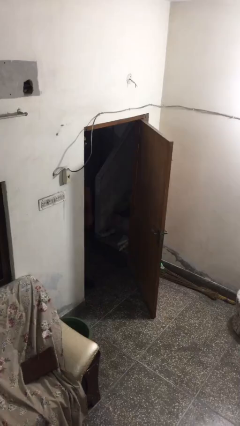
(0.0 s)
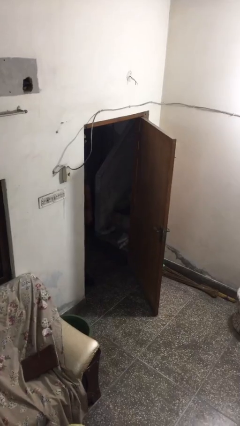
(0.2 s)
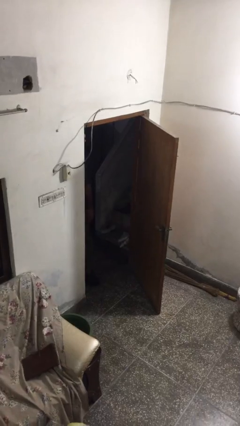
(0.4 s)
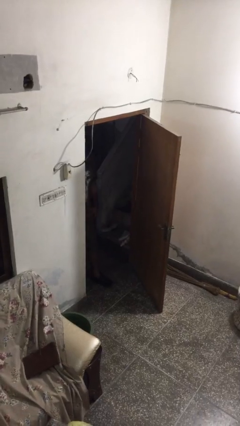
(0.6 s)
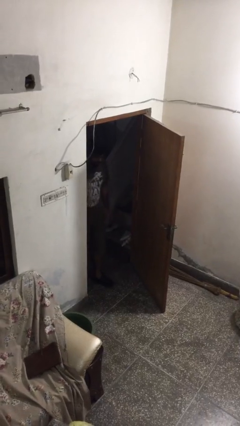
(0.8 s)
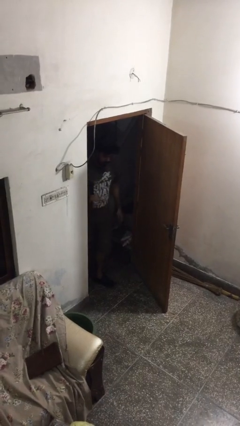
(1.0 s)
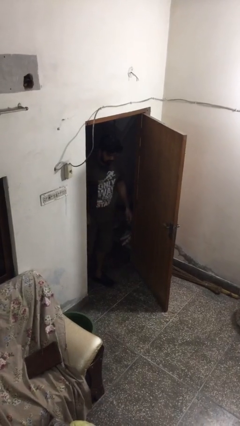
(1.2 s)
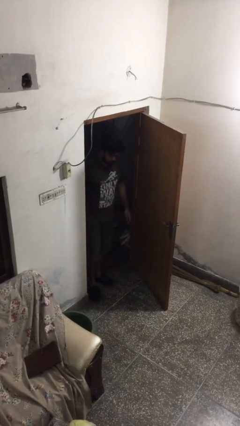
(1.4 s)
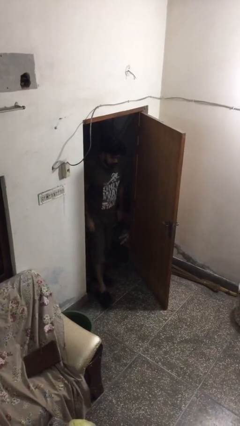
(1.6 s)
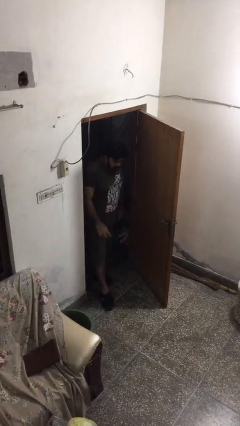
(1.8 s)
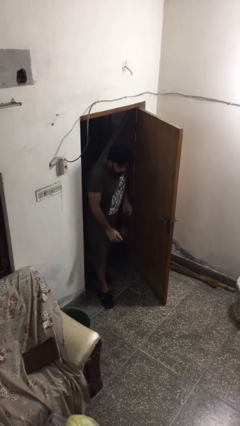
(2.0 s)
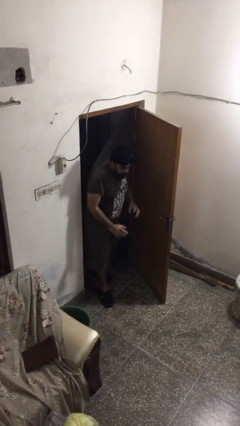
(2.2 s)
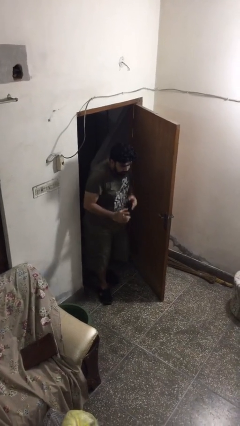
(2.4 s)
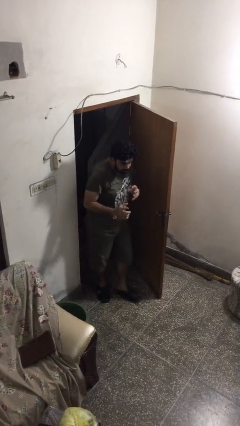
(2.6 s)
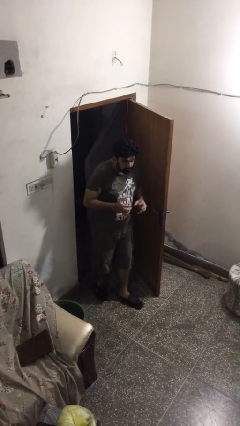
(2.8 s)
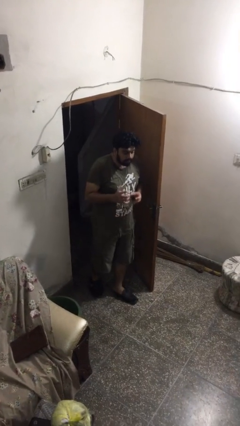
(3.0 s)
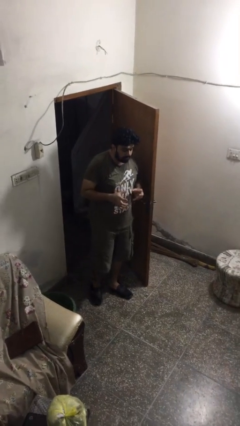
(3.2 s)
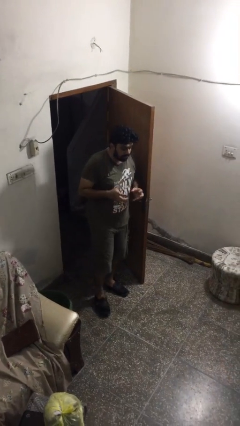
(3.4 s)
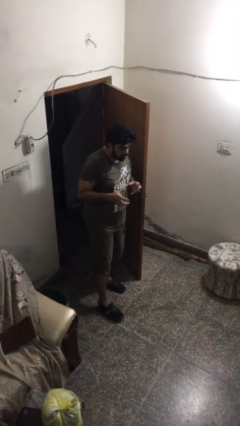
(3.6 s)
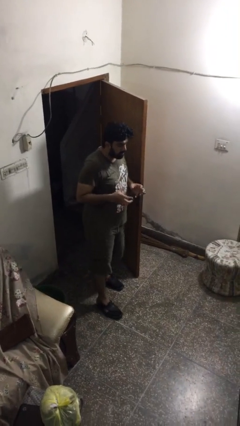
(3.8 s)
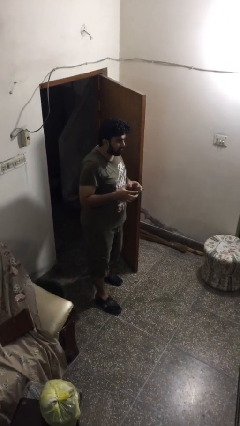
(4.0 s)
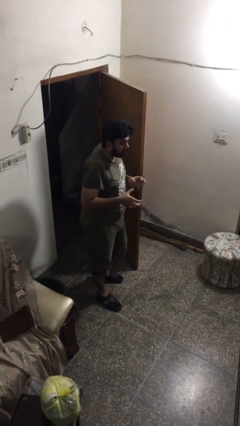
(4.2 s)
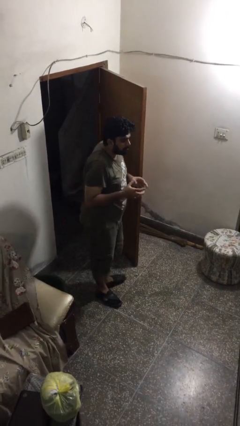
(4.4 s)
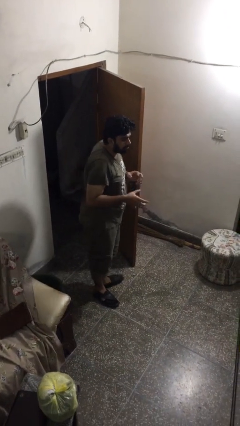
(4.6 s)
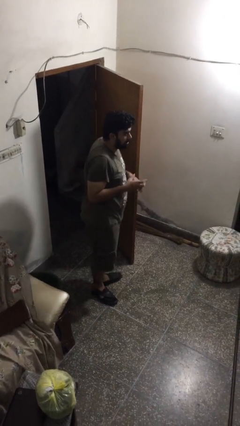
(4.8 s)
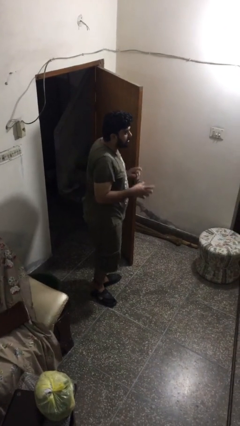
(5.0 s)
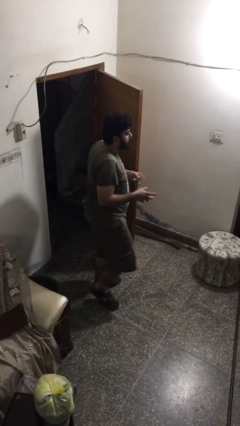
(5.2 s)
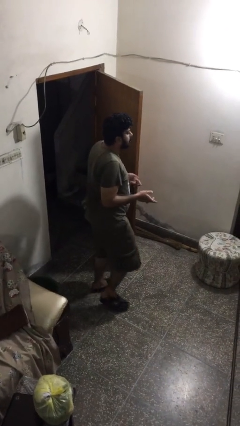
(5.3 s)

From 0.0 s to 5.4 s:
person enters scene through structure

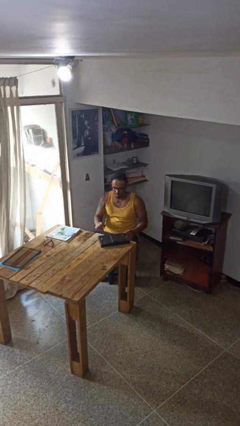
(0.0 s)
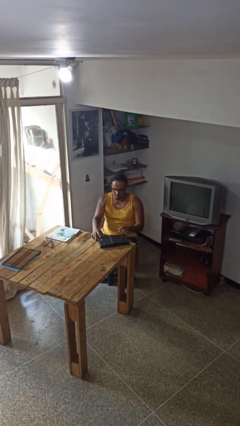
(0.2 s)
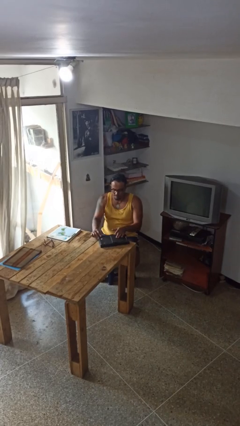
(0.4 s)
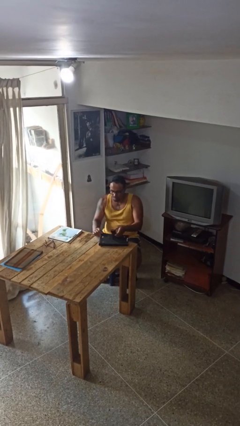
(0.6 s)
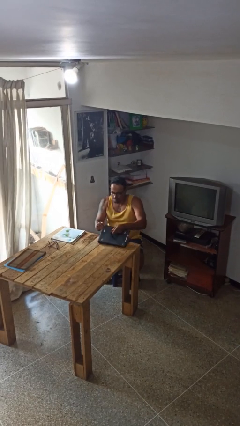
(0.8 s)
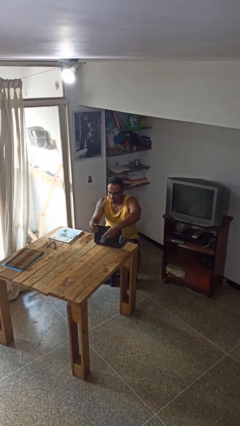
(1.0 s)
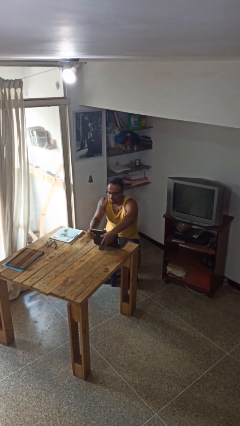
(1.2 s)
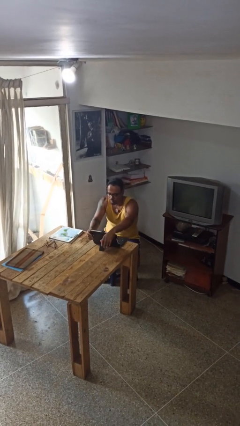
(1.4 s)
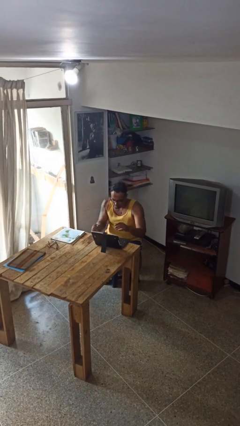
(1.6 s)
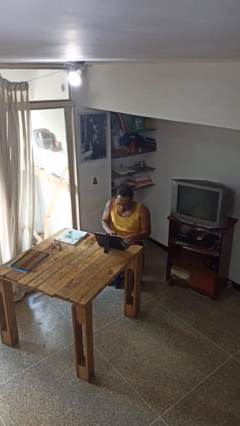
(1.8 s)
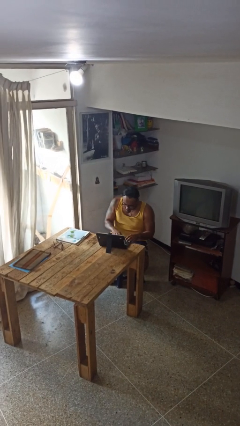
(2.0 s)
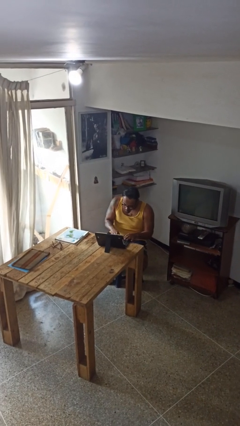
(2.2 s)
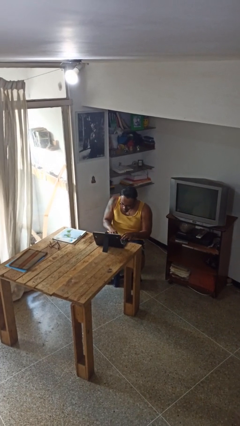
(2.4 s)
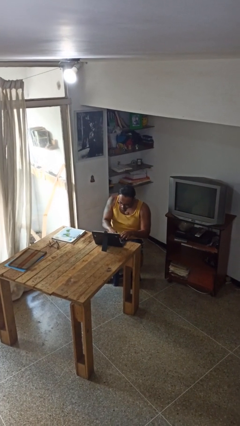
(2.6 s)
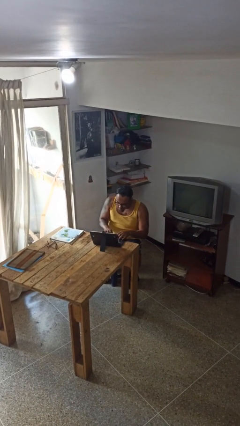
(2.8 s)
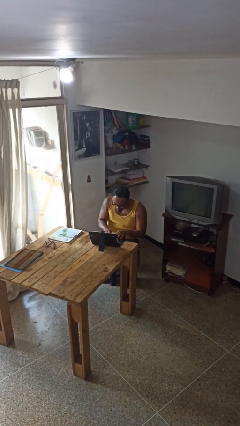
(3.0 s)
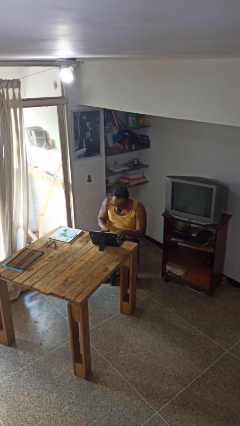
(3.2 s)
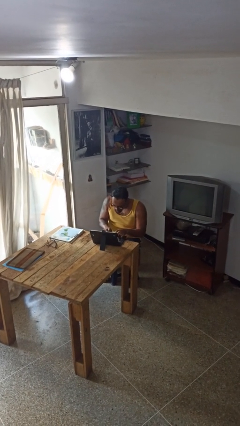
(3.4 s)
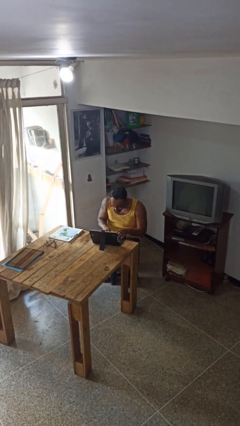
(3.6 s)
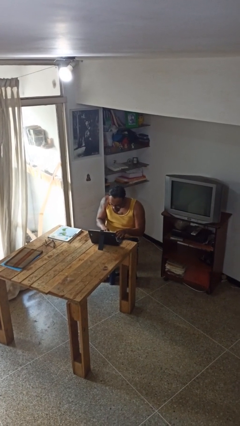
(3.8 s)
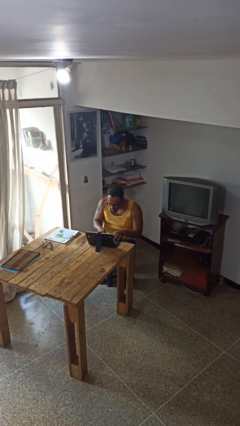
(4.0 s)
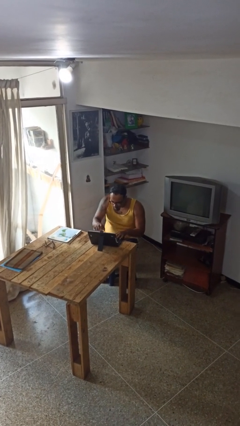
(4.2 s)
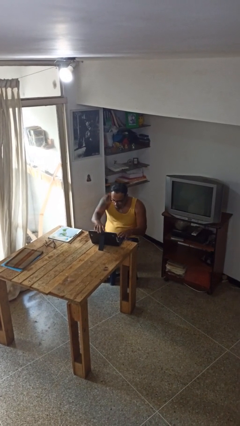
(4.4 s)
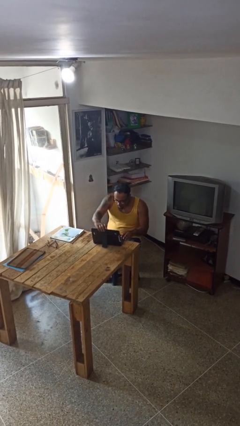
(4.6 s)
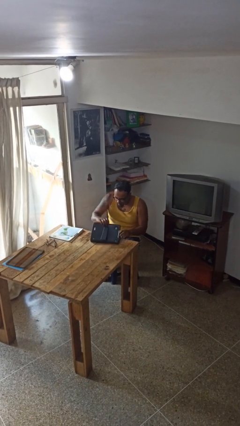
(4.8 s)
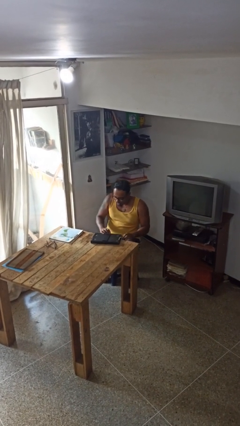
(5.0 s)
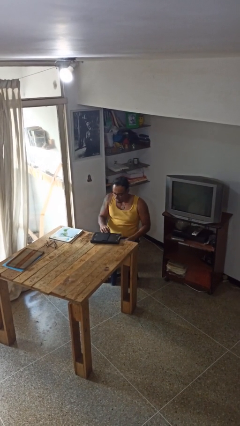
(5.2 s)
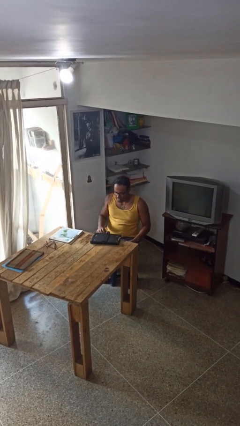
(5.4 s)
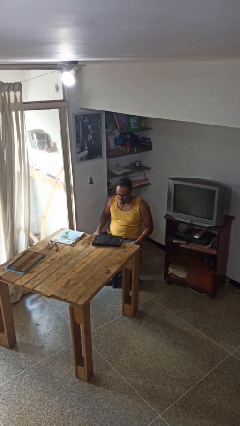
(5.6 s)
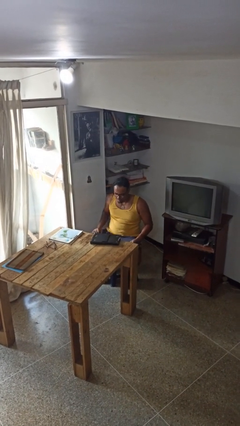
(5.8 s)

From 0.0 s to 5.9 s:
person interacts with laptop

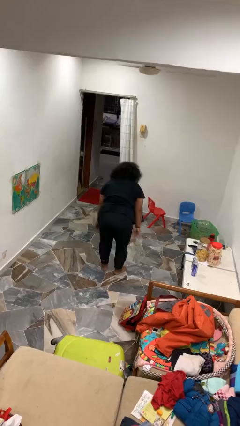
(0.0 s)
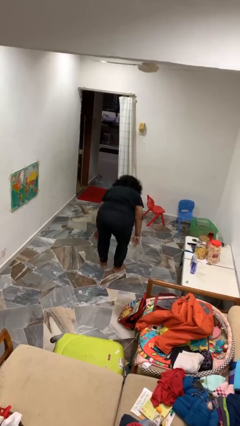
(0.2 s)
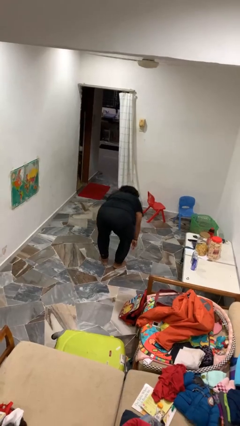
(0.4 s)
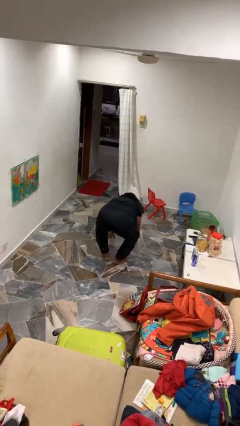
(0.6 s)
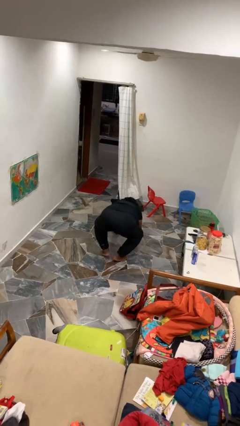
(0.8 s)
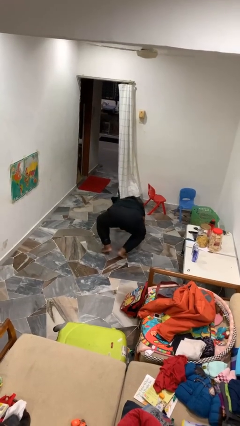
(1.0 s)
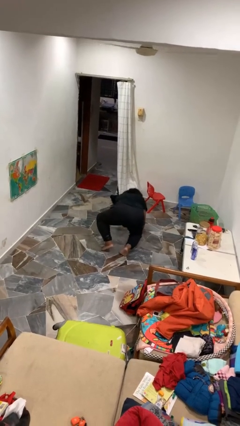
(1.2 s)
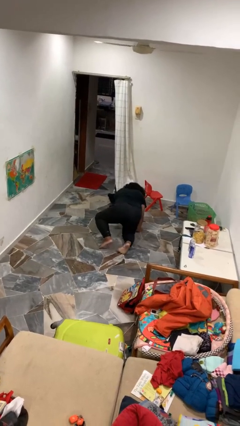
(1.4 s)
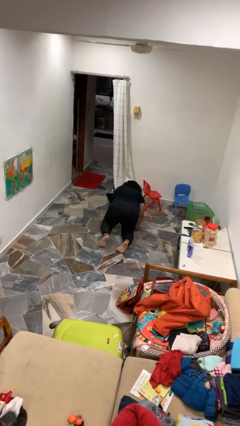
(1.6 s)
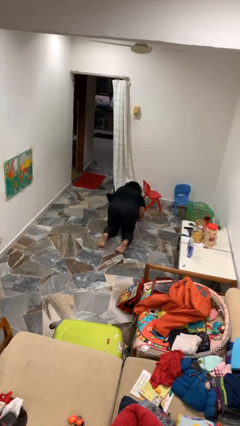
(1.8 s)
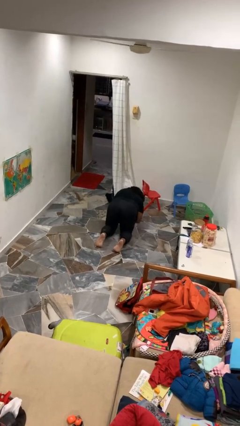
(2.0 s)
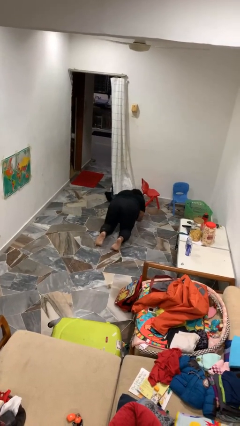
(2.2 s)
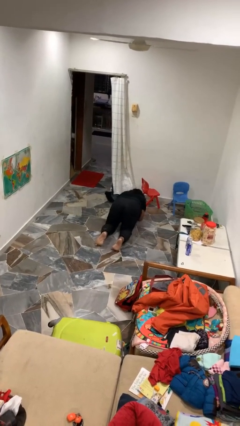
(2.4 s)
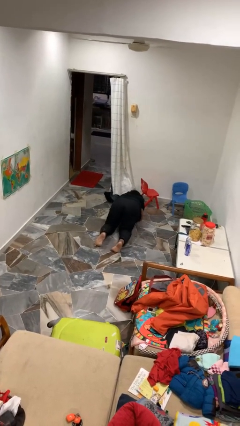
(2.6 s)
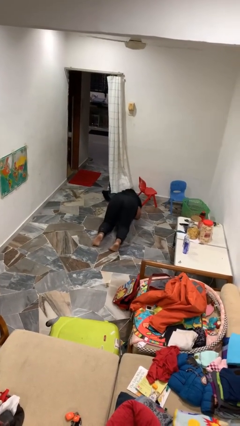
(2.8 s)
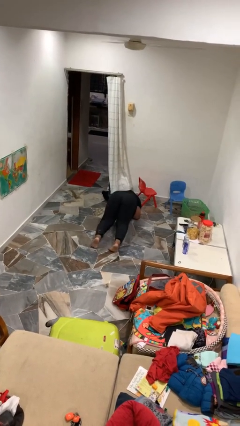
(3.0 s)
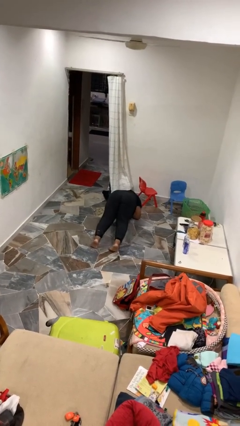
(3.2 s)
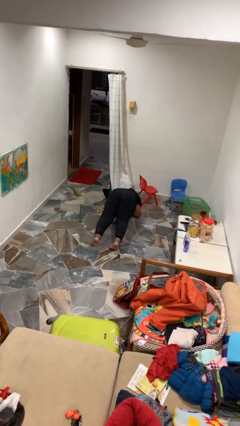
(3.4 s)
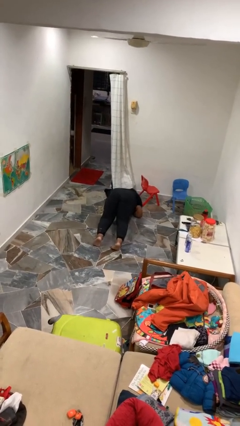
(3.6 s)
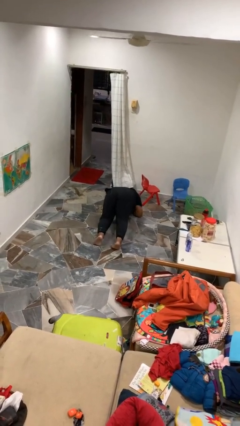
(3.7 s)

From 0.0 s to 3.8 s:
person exercises with plank

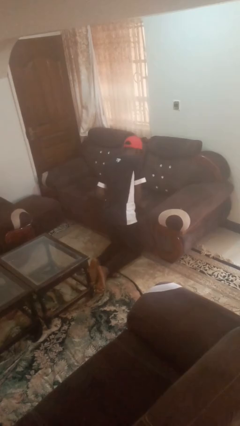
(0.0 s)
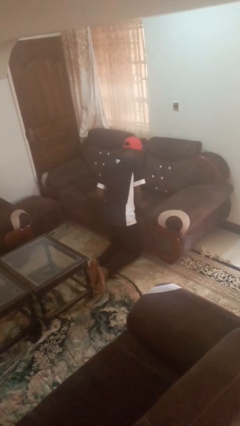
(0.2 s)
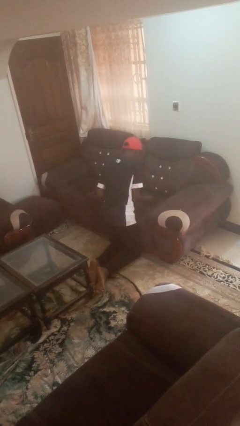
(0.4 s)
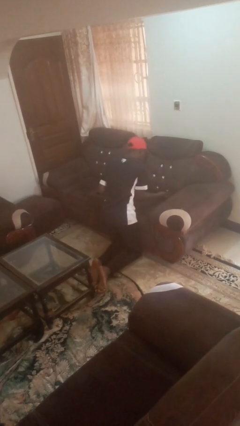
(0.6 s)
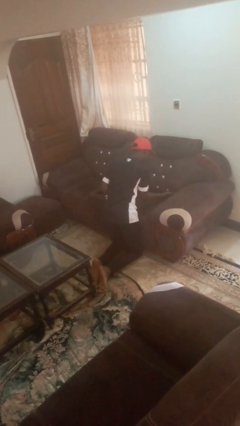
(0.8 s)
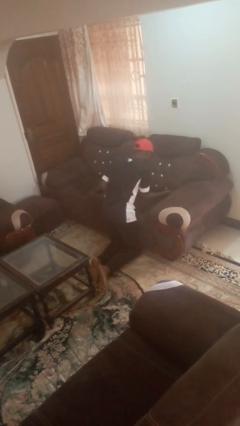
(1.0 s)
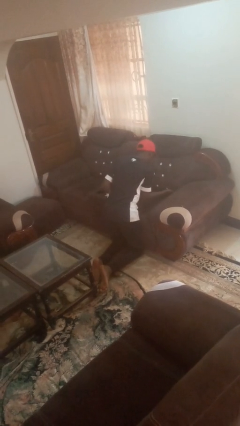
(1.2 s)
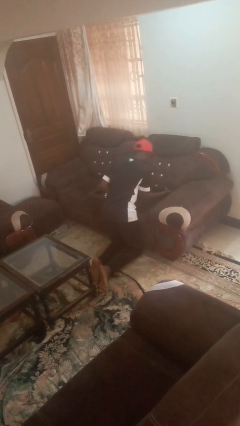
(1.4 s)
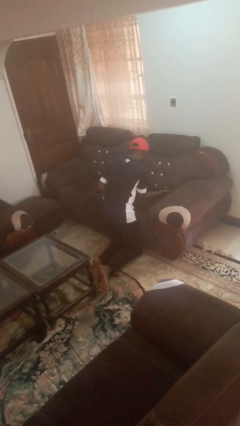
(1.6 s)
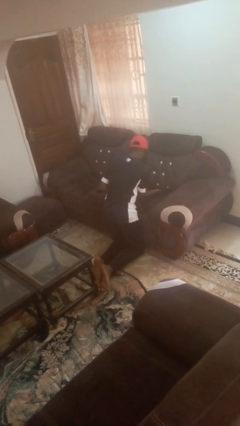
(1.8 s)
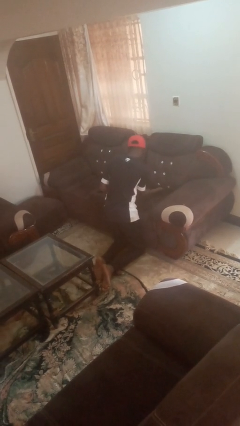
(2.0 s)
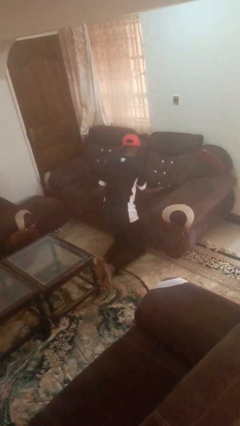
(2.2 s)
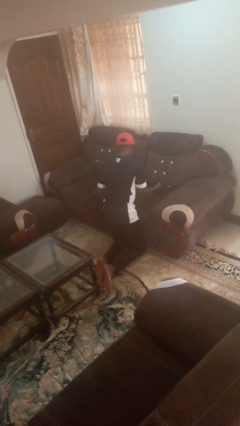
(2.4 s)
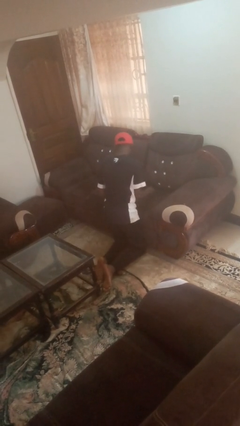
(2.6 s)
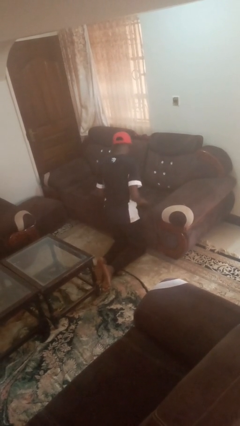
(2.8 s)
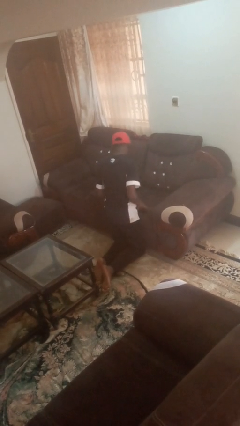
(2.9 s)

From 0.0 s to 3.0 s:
person searches in couch
